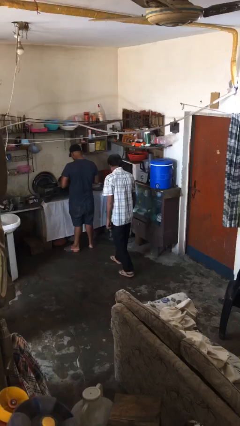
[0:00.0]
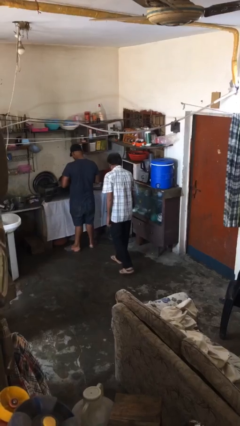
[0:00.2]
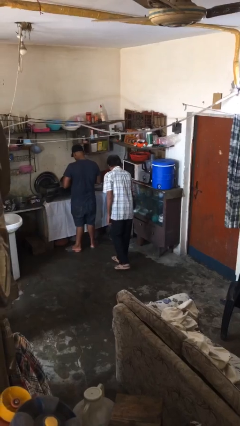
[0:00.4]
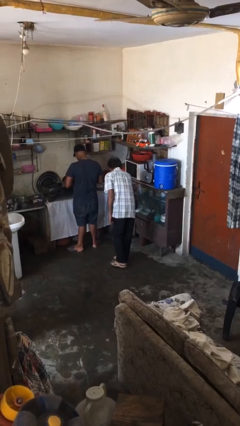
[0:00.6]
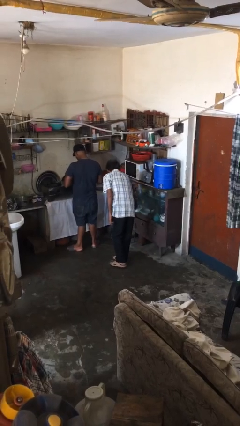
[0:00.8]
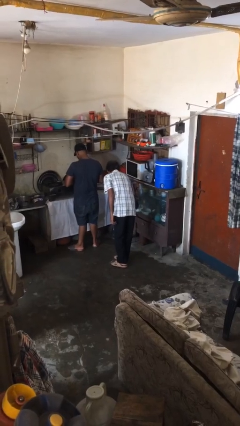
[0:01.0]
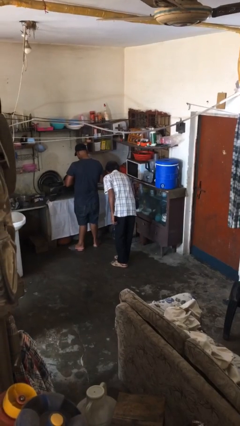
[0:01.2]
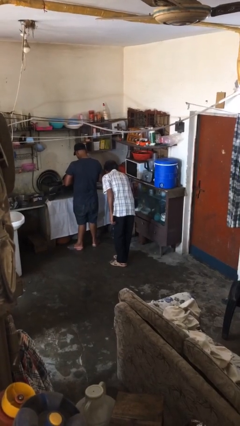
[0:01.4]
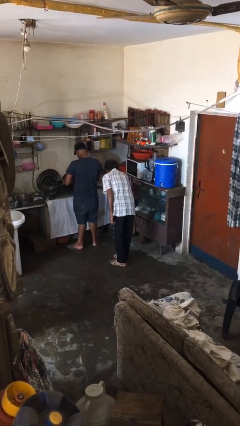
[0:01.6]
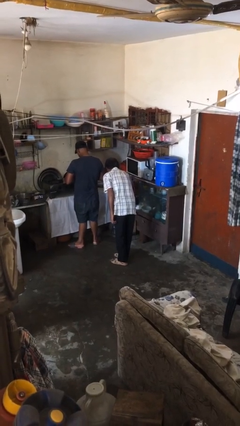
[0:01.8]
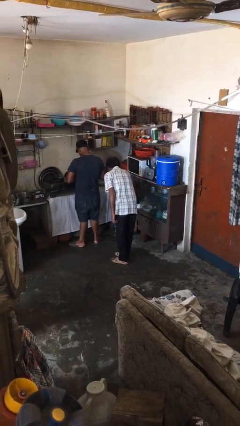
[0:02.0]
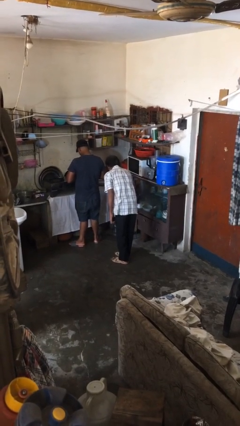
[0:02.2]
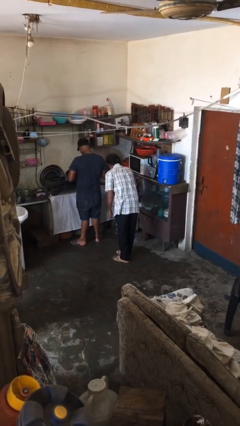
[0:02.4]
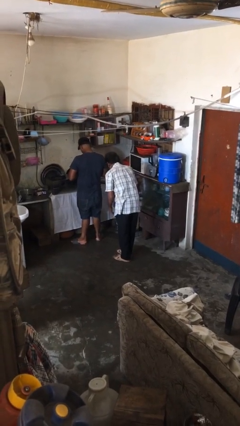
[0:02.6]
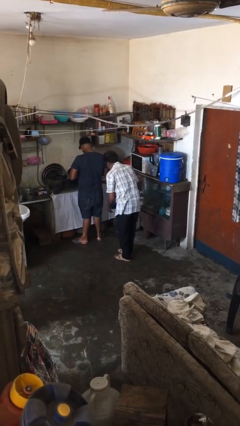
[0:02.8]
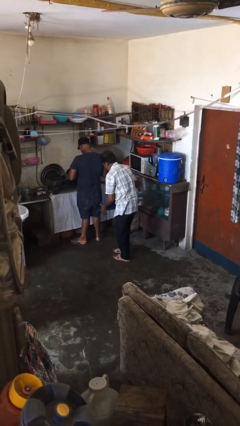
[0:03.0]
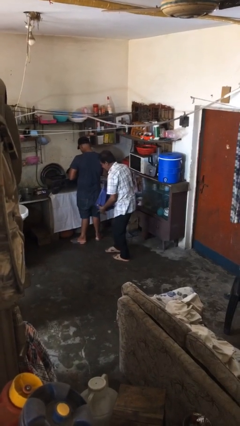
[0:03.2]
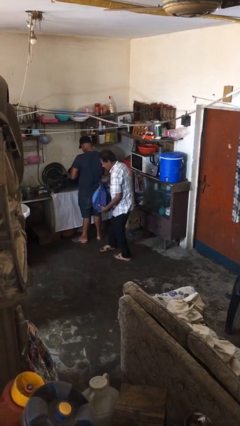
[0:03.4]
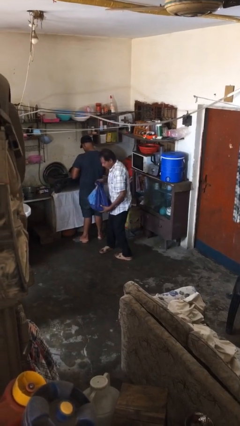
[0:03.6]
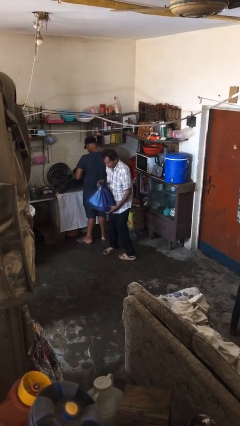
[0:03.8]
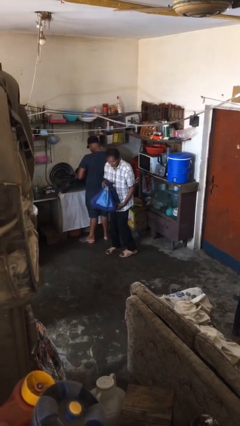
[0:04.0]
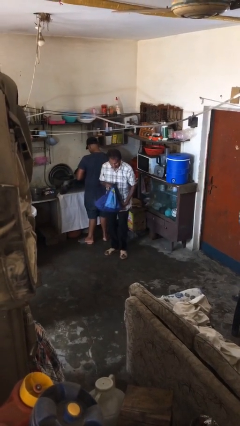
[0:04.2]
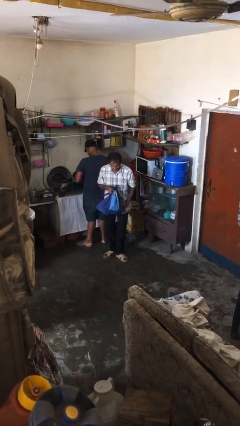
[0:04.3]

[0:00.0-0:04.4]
person steals object from person

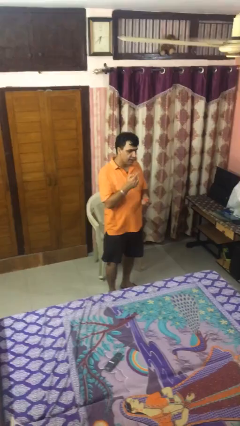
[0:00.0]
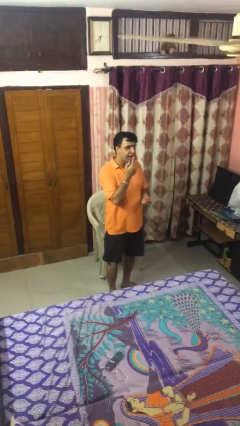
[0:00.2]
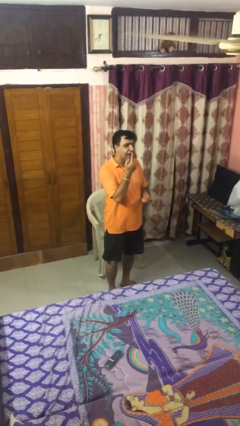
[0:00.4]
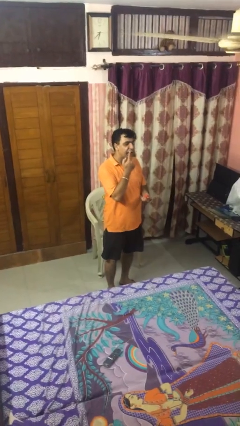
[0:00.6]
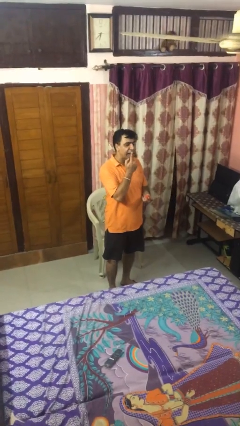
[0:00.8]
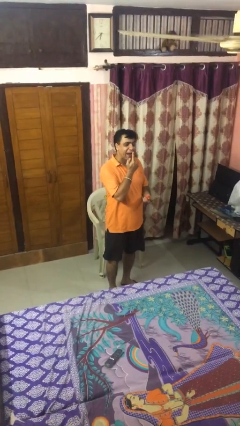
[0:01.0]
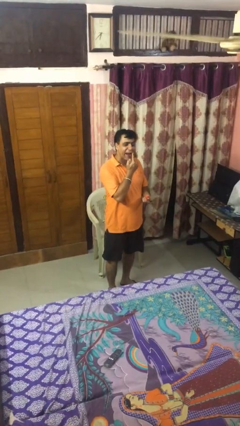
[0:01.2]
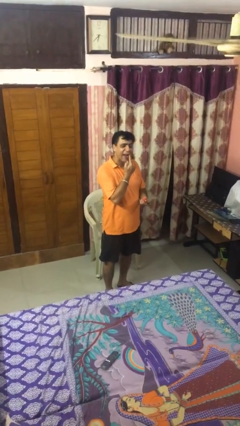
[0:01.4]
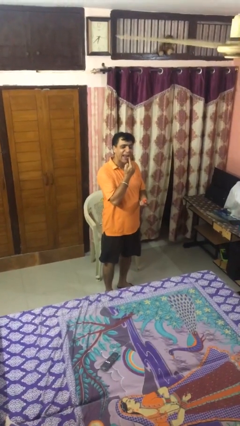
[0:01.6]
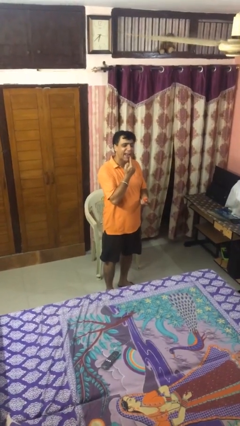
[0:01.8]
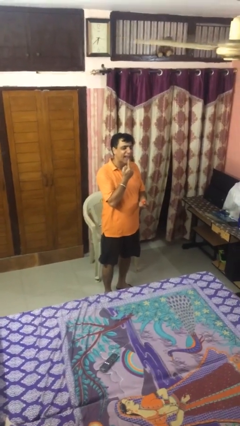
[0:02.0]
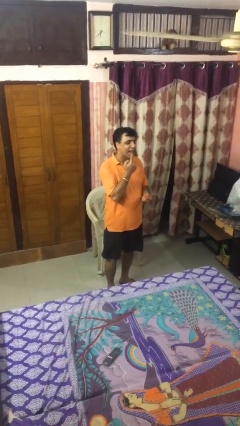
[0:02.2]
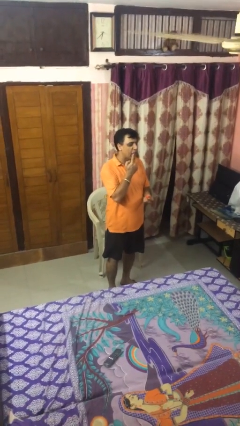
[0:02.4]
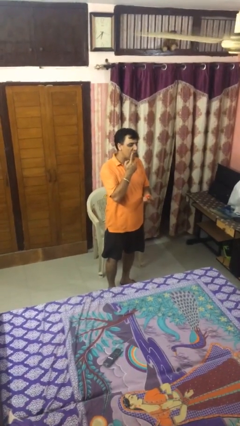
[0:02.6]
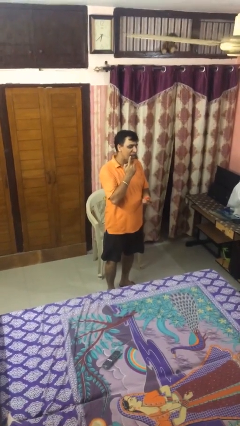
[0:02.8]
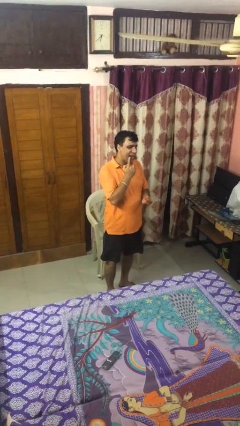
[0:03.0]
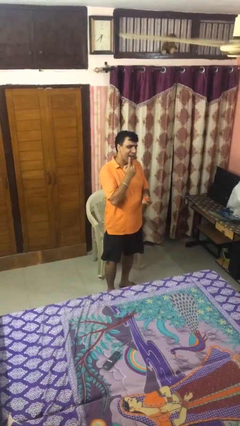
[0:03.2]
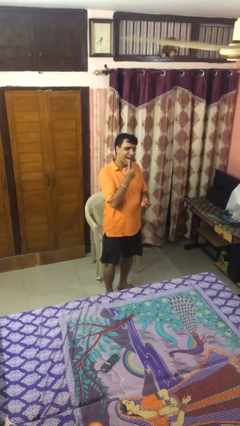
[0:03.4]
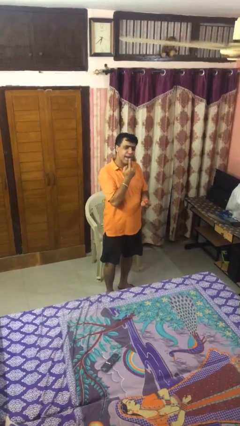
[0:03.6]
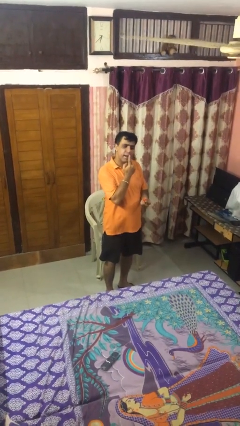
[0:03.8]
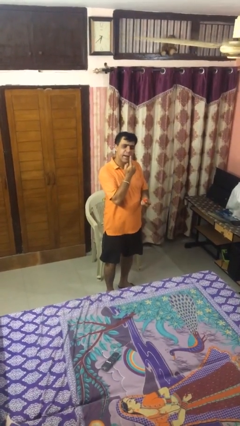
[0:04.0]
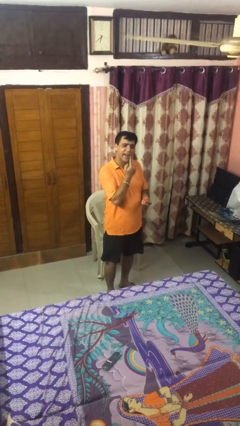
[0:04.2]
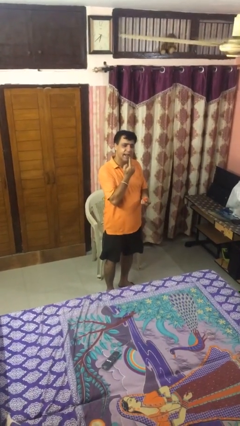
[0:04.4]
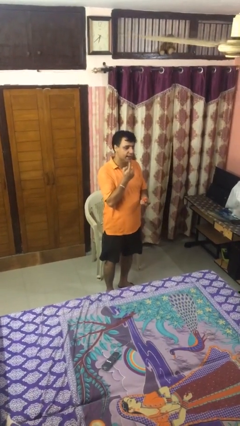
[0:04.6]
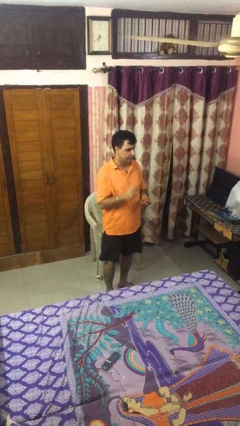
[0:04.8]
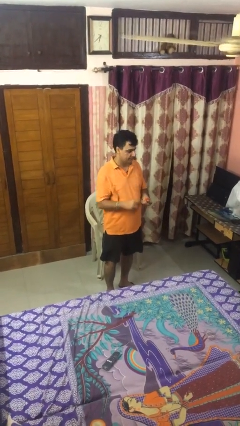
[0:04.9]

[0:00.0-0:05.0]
person applies lip makeup

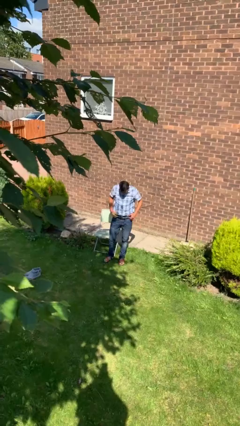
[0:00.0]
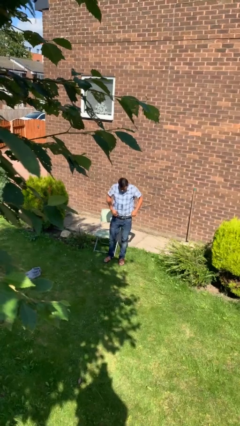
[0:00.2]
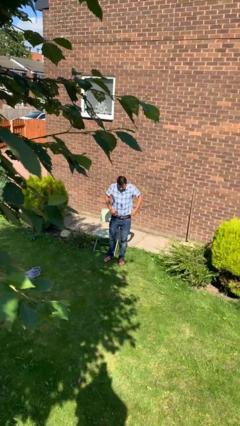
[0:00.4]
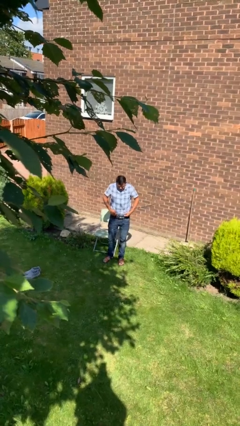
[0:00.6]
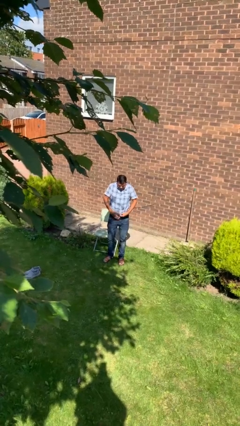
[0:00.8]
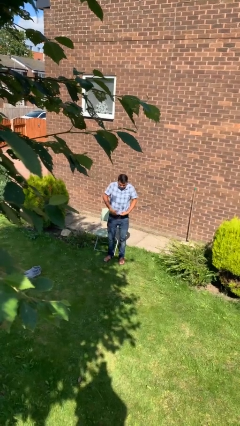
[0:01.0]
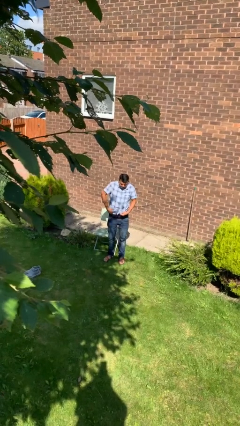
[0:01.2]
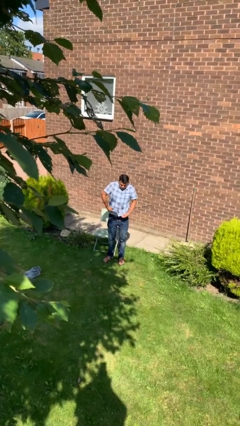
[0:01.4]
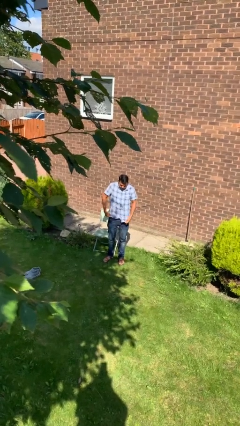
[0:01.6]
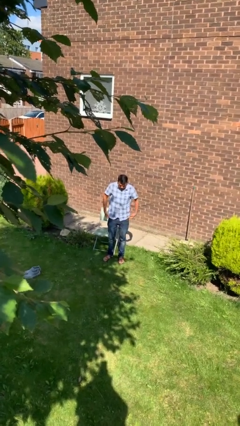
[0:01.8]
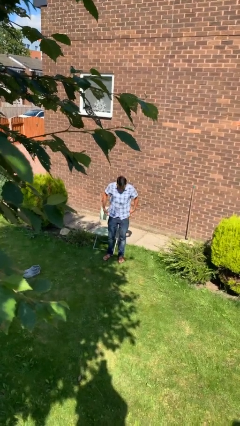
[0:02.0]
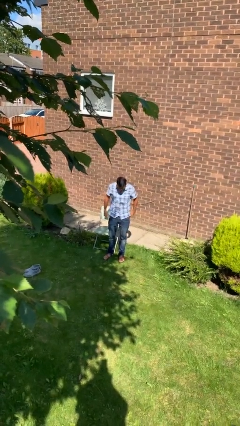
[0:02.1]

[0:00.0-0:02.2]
person untucks shirt

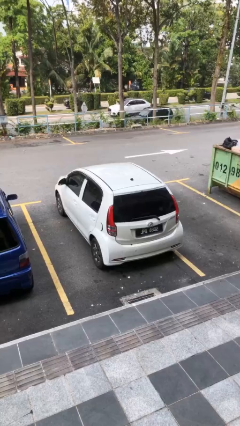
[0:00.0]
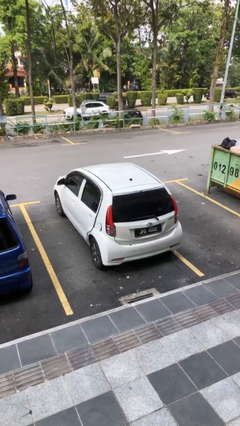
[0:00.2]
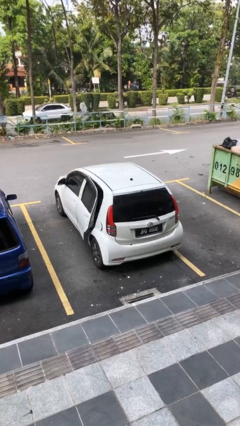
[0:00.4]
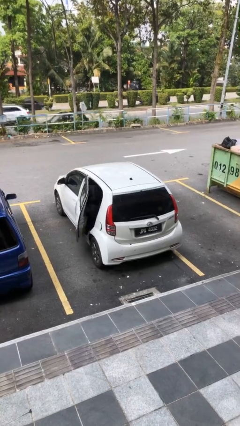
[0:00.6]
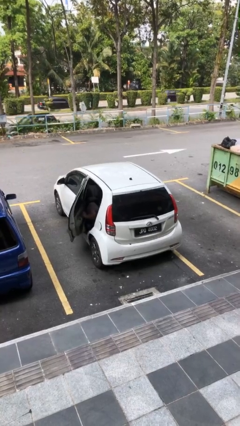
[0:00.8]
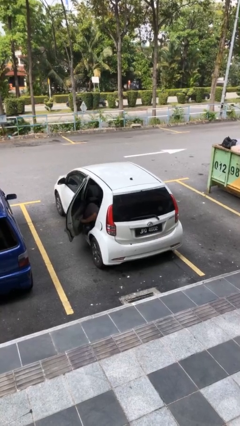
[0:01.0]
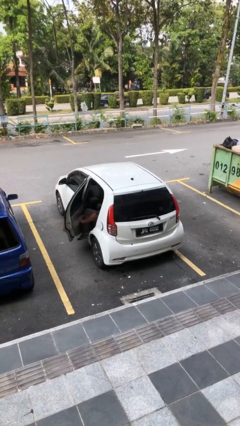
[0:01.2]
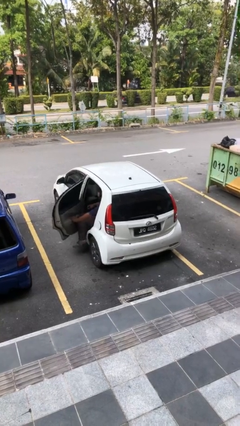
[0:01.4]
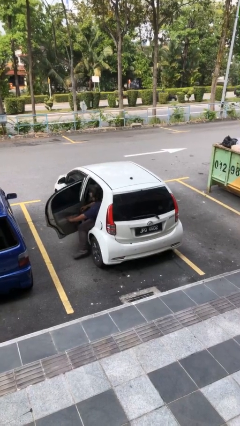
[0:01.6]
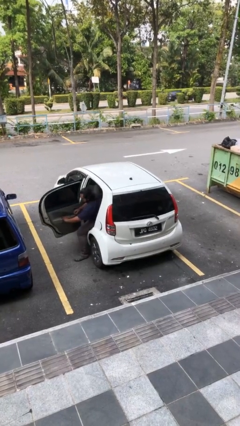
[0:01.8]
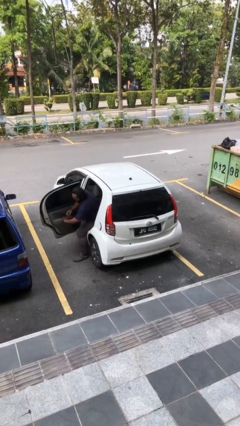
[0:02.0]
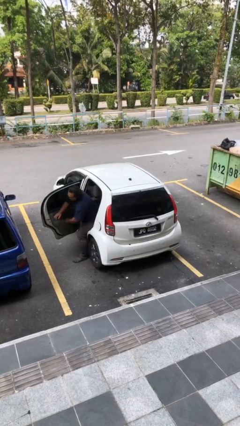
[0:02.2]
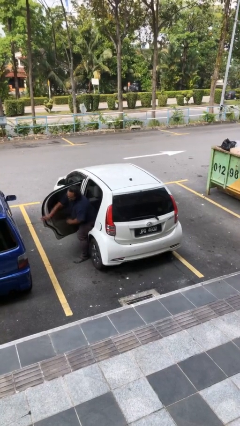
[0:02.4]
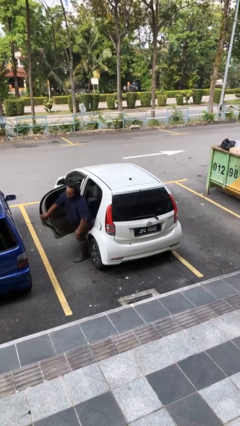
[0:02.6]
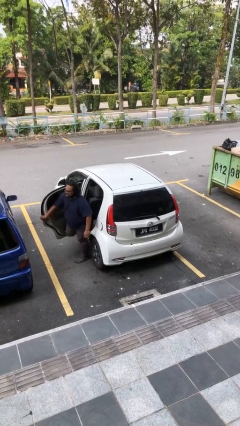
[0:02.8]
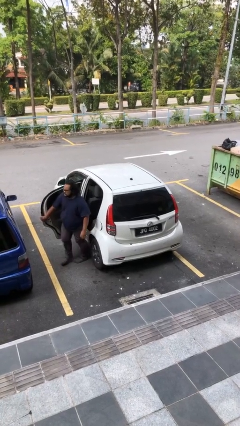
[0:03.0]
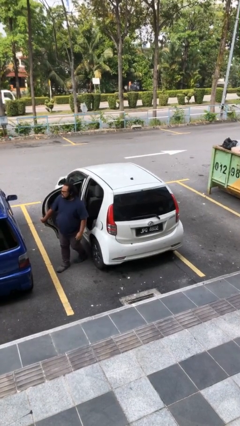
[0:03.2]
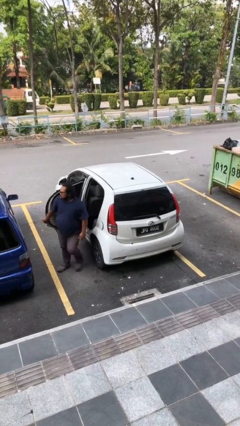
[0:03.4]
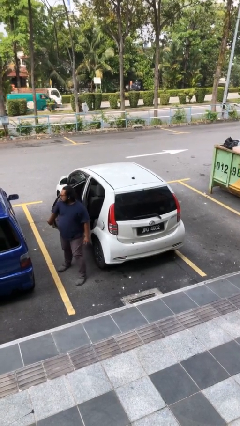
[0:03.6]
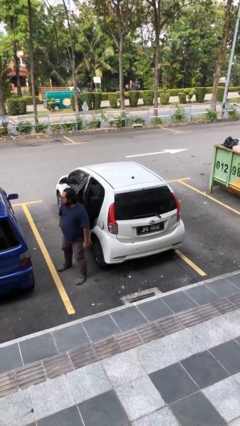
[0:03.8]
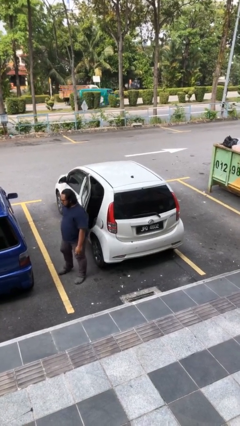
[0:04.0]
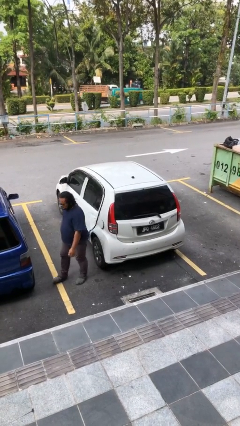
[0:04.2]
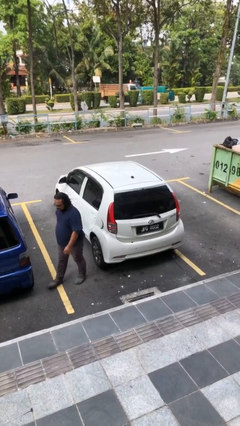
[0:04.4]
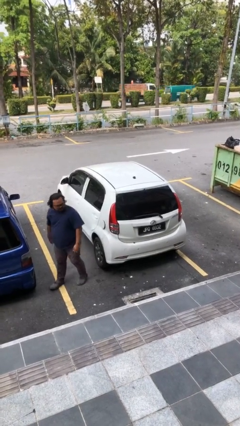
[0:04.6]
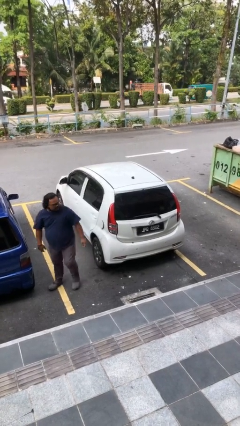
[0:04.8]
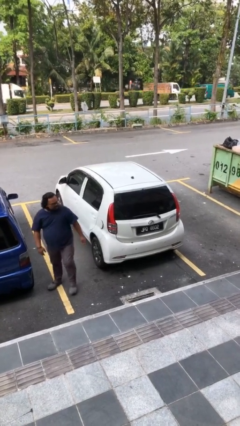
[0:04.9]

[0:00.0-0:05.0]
car drops off person

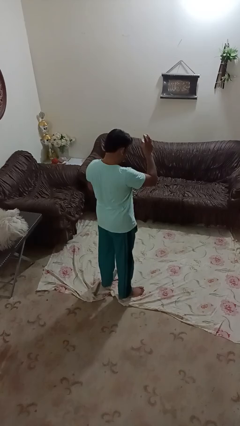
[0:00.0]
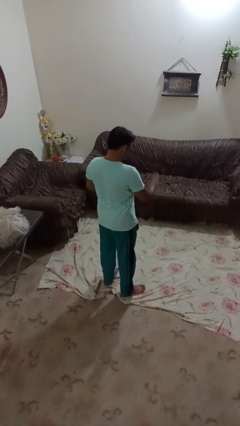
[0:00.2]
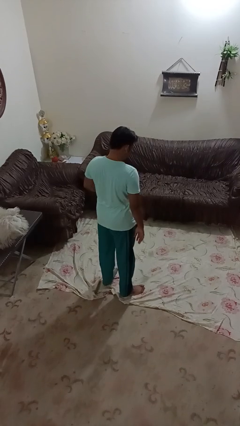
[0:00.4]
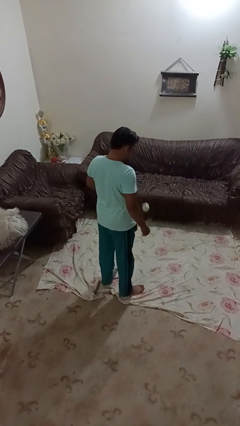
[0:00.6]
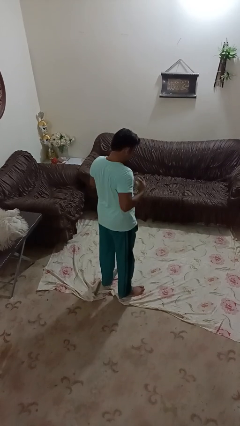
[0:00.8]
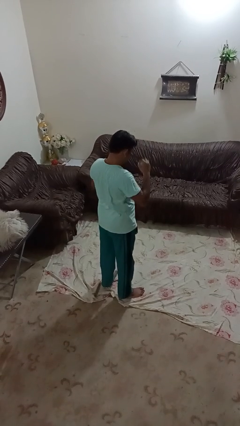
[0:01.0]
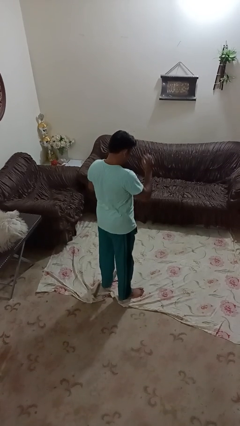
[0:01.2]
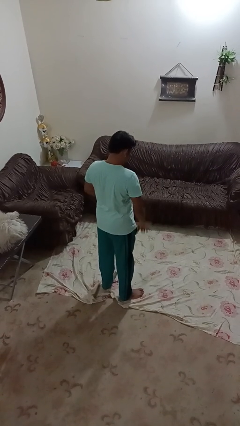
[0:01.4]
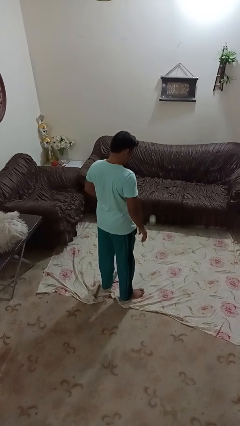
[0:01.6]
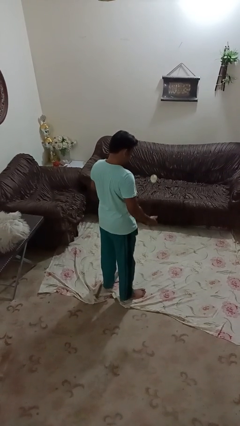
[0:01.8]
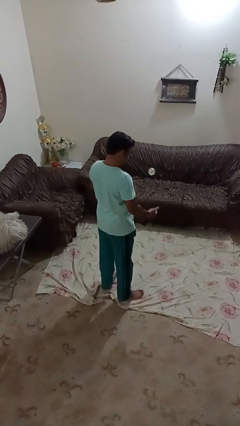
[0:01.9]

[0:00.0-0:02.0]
person bounces ball on floor
